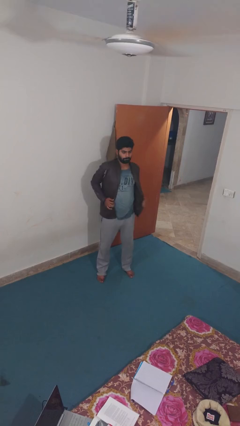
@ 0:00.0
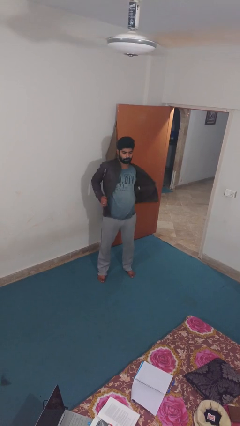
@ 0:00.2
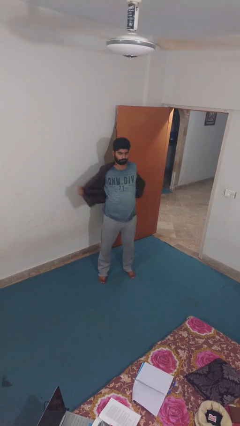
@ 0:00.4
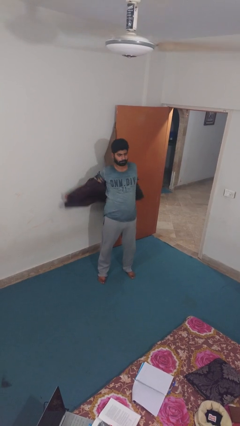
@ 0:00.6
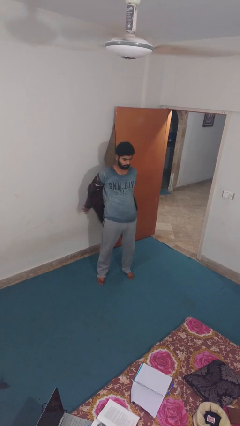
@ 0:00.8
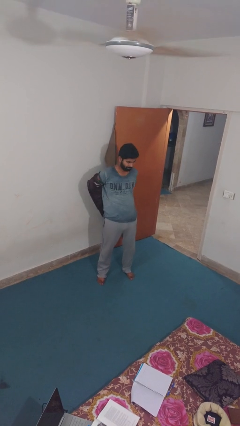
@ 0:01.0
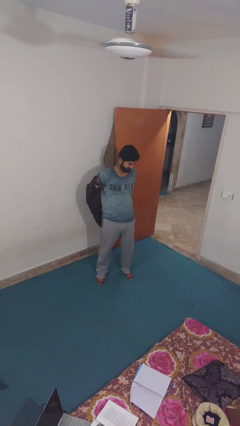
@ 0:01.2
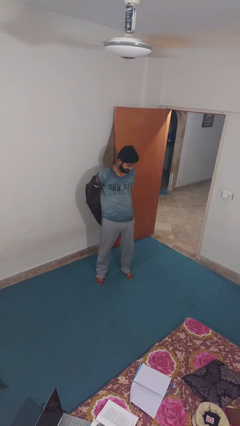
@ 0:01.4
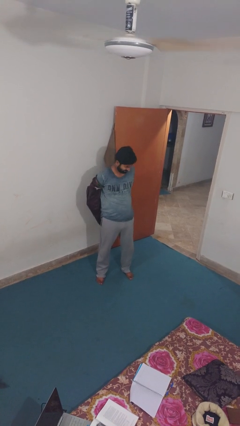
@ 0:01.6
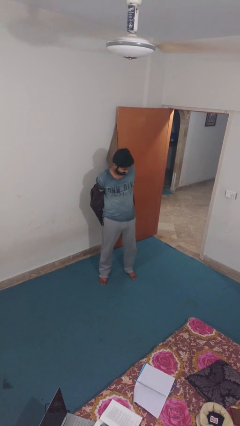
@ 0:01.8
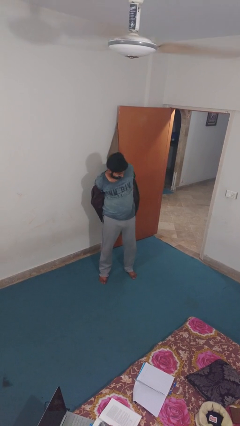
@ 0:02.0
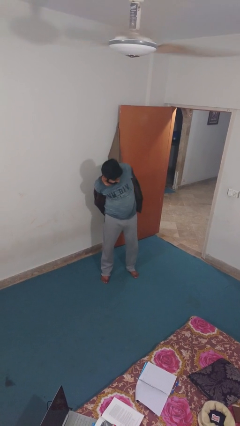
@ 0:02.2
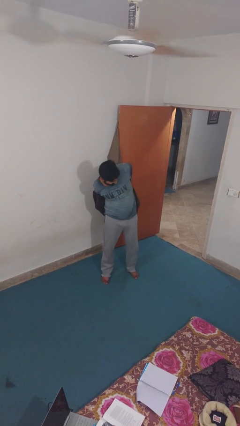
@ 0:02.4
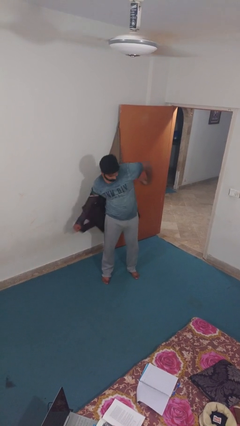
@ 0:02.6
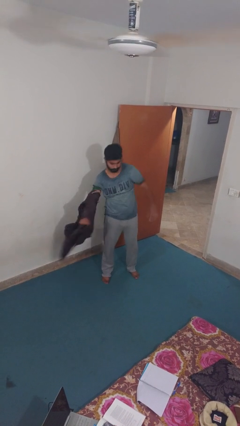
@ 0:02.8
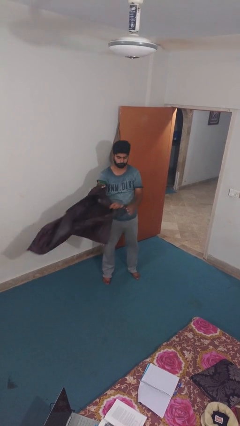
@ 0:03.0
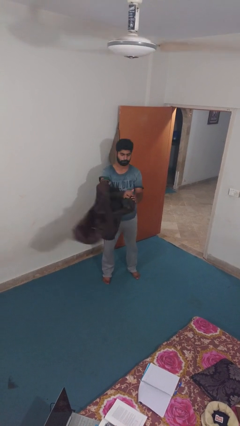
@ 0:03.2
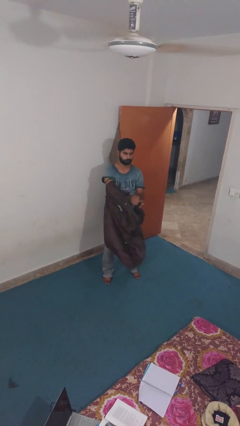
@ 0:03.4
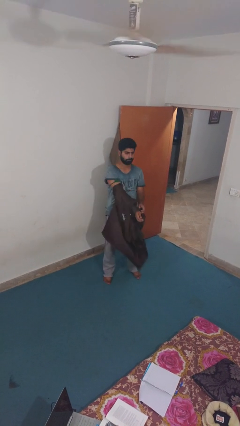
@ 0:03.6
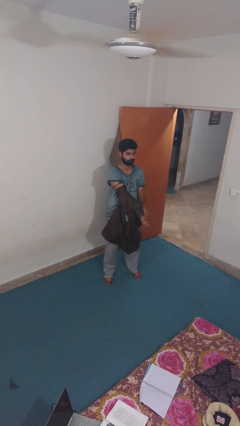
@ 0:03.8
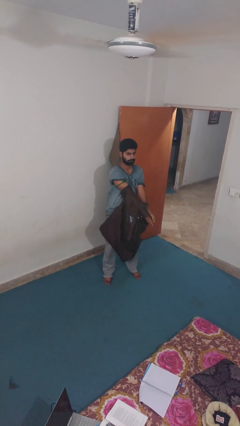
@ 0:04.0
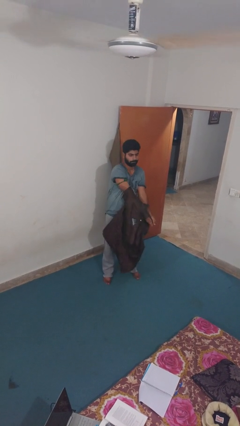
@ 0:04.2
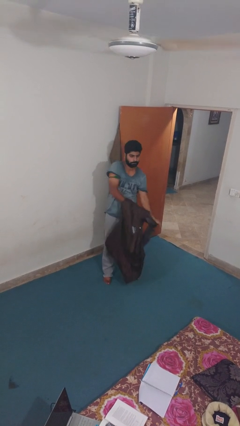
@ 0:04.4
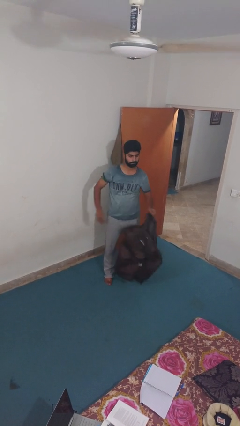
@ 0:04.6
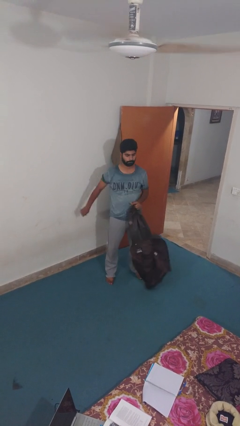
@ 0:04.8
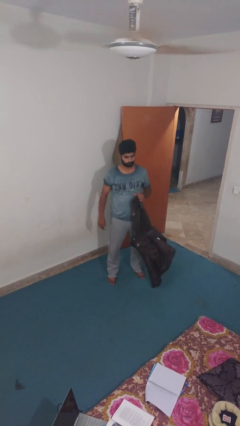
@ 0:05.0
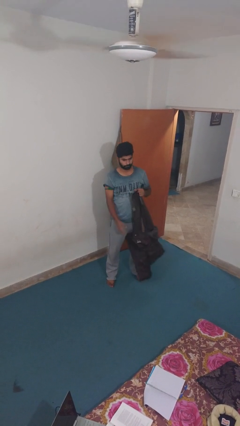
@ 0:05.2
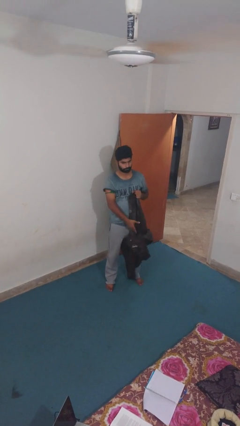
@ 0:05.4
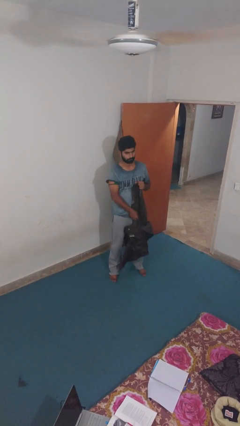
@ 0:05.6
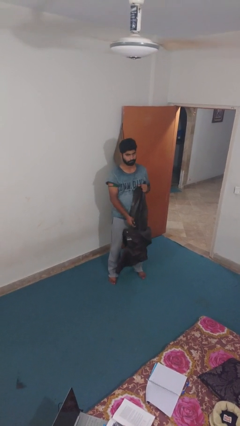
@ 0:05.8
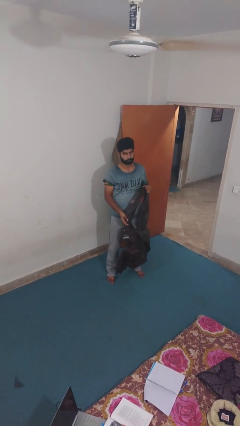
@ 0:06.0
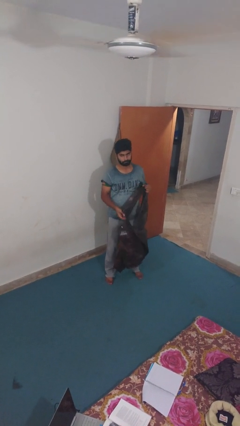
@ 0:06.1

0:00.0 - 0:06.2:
person takes off jacket

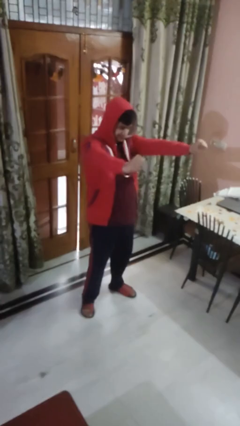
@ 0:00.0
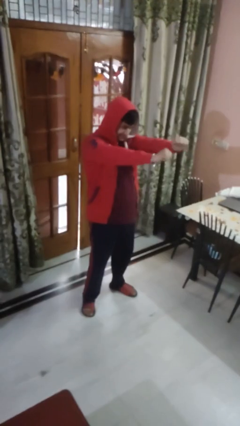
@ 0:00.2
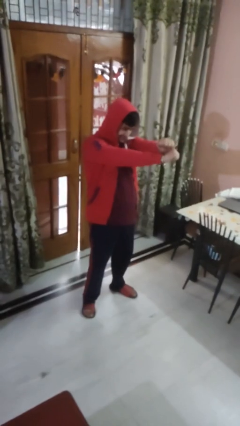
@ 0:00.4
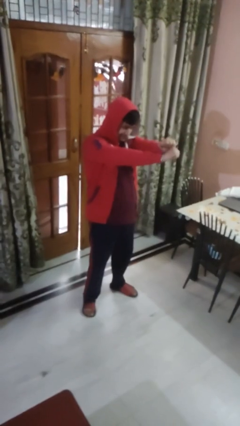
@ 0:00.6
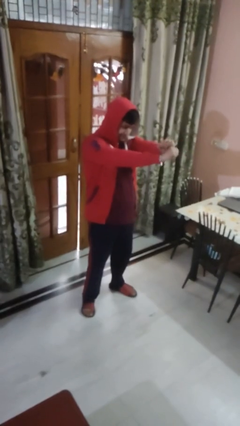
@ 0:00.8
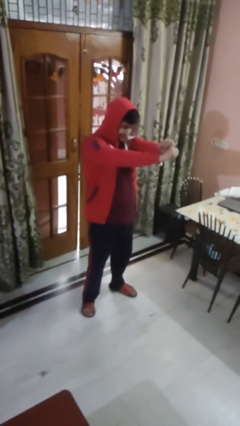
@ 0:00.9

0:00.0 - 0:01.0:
person gestures zoom out

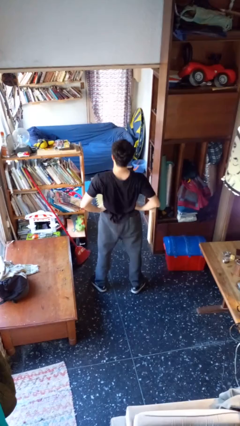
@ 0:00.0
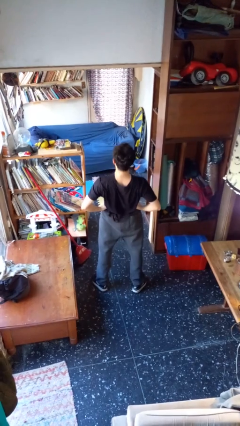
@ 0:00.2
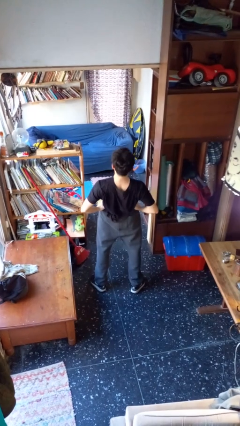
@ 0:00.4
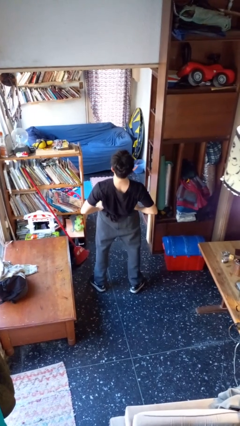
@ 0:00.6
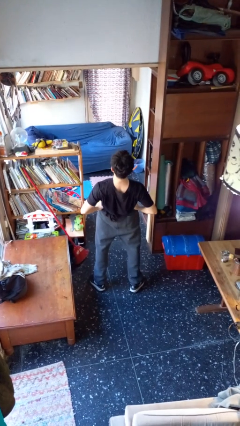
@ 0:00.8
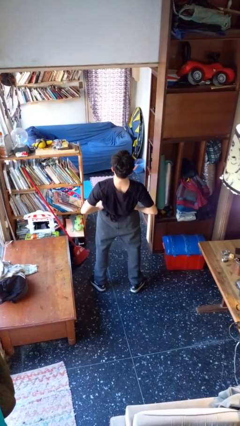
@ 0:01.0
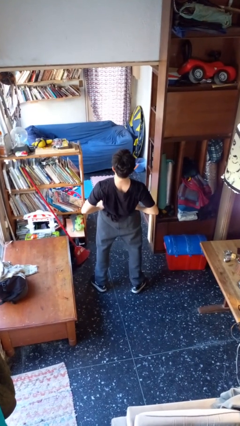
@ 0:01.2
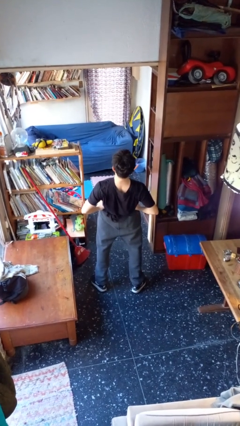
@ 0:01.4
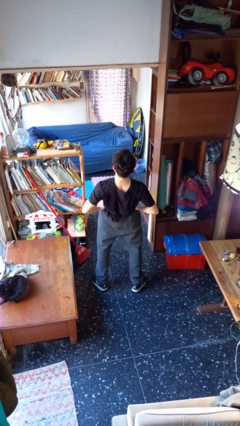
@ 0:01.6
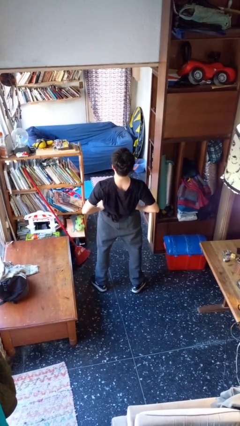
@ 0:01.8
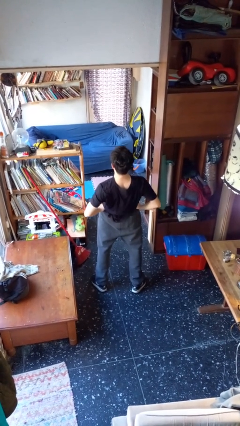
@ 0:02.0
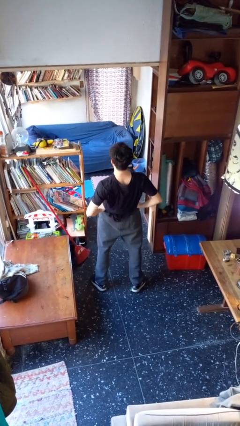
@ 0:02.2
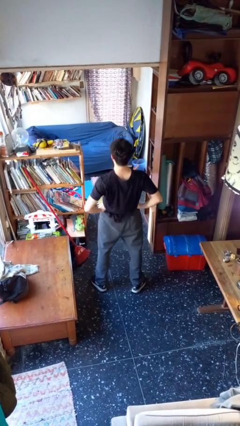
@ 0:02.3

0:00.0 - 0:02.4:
person stretches back

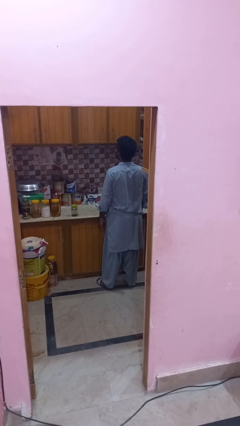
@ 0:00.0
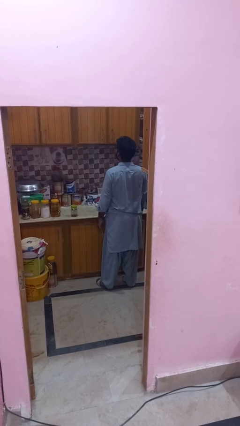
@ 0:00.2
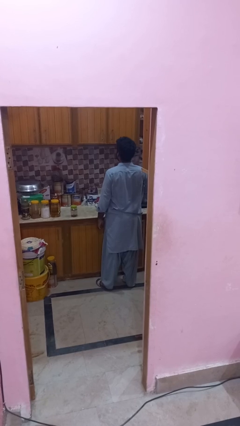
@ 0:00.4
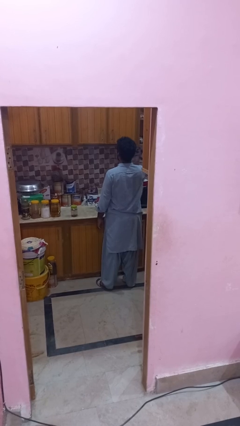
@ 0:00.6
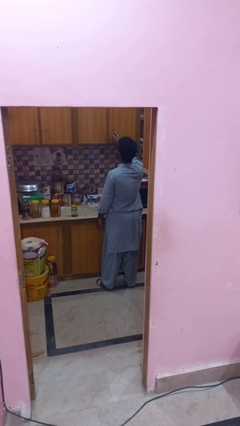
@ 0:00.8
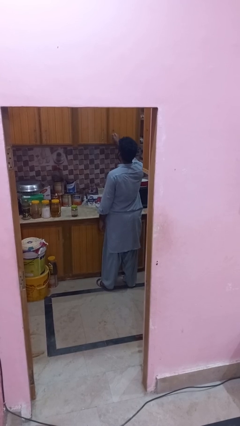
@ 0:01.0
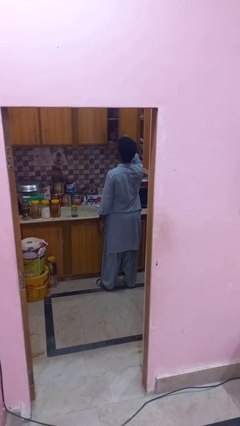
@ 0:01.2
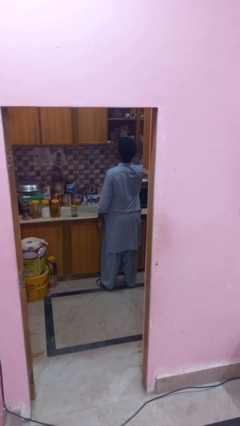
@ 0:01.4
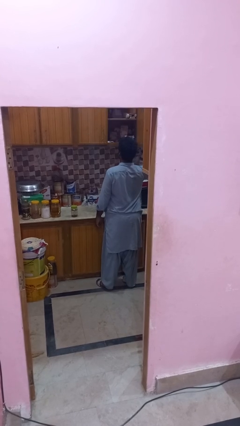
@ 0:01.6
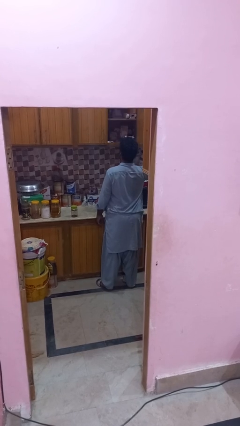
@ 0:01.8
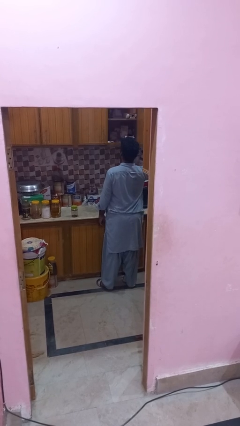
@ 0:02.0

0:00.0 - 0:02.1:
person opens cabinet

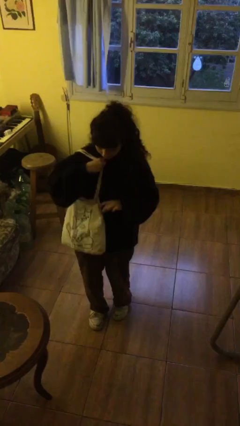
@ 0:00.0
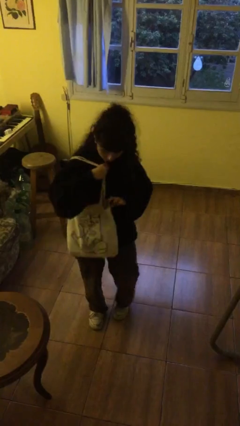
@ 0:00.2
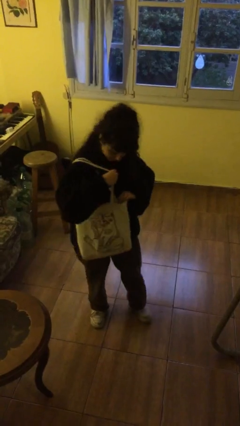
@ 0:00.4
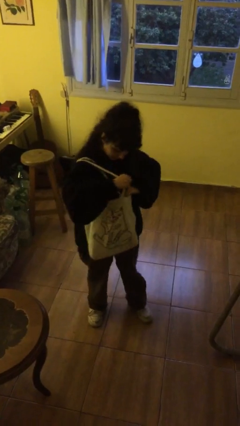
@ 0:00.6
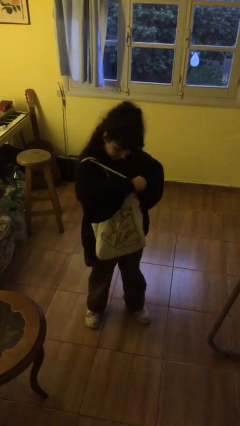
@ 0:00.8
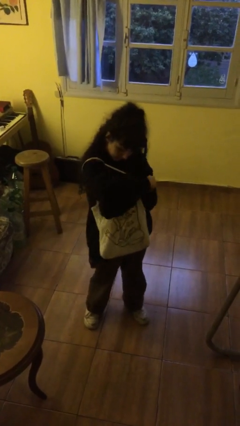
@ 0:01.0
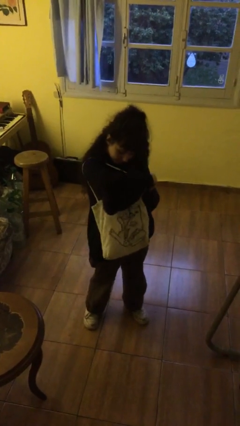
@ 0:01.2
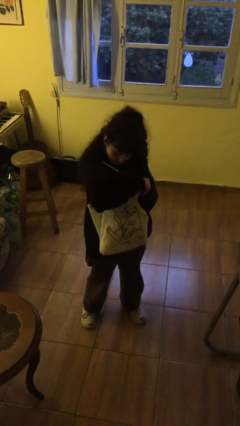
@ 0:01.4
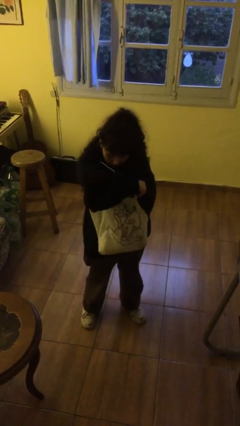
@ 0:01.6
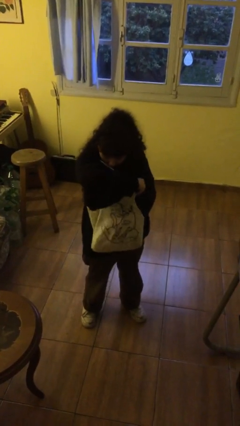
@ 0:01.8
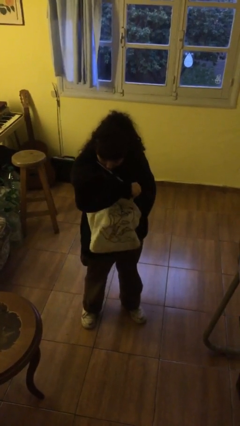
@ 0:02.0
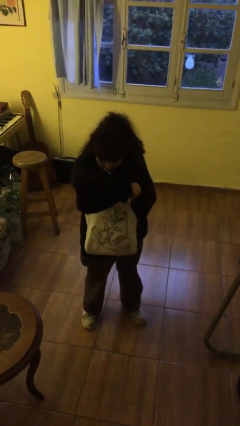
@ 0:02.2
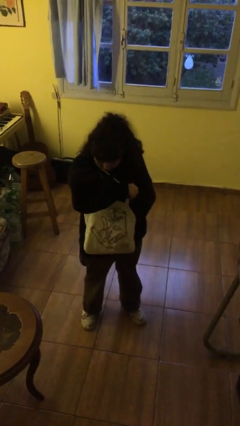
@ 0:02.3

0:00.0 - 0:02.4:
person searches in purse

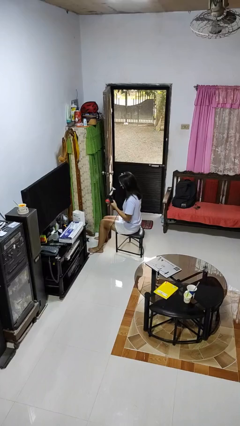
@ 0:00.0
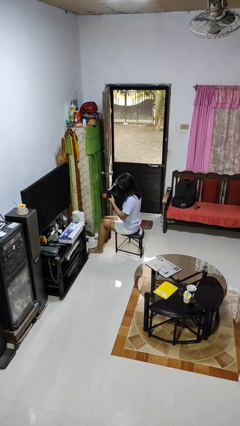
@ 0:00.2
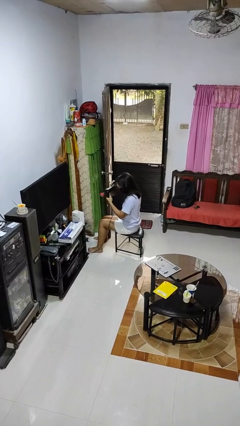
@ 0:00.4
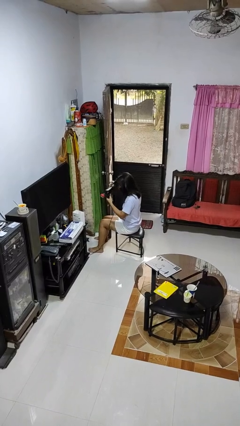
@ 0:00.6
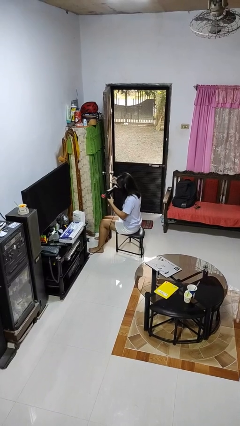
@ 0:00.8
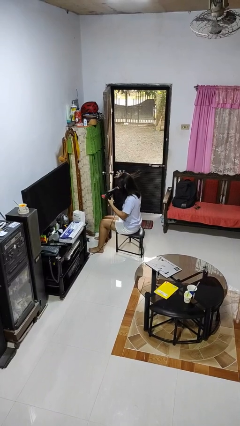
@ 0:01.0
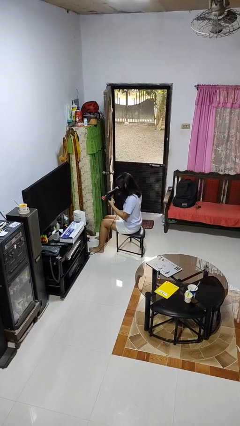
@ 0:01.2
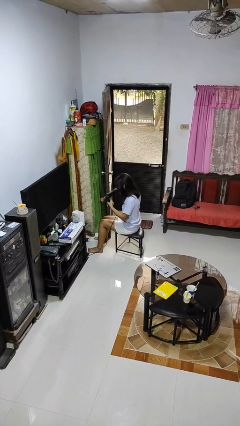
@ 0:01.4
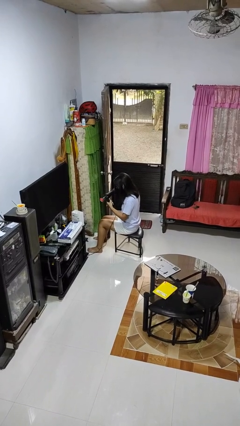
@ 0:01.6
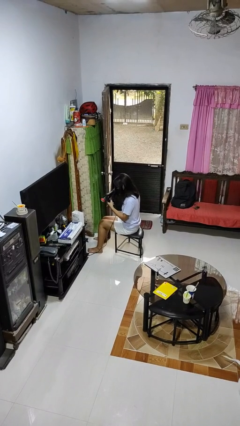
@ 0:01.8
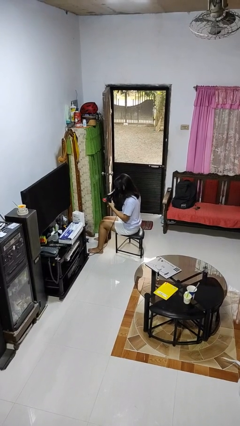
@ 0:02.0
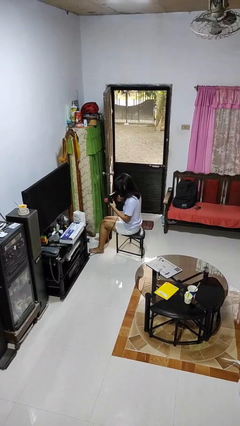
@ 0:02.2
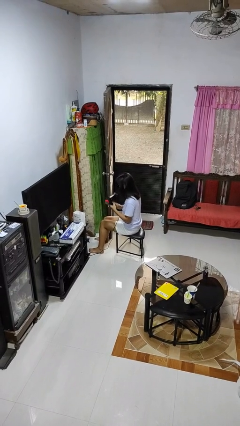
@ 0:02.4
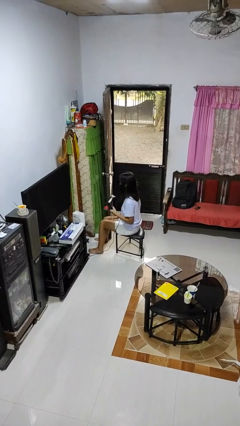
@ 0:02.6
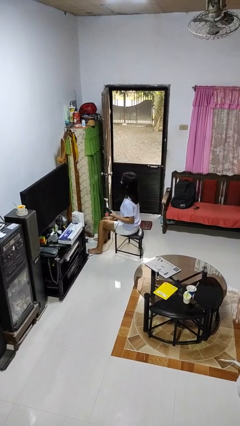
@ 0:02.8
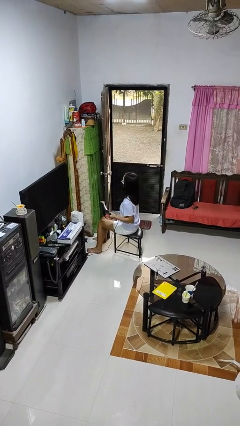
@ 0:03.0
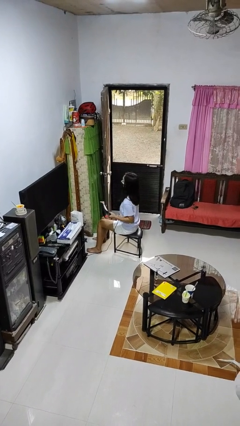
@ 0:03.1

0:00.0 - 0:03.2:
person dries hair with hairdryer
